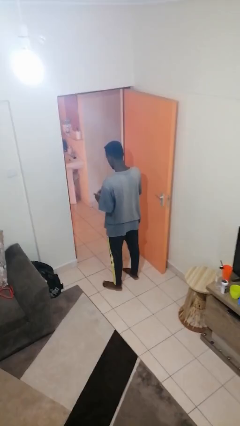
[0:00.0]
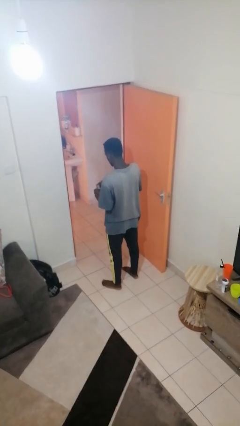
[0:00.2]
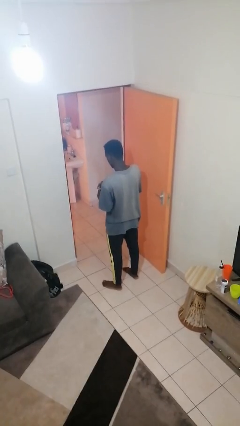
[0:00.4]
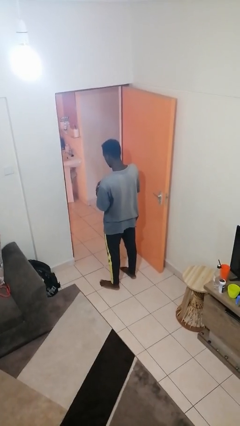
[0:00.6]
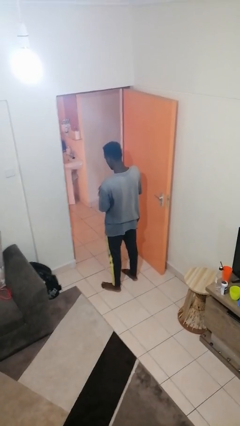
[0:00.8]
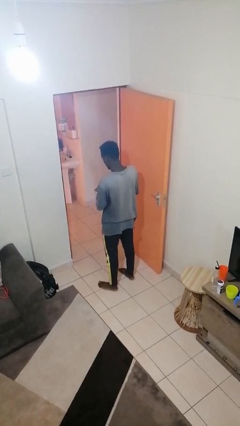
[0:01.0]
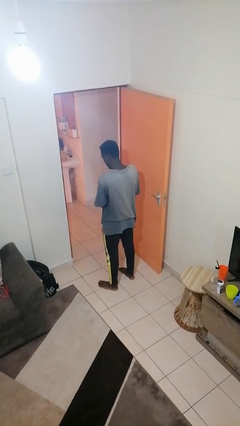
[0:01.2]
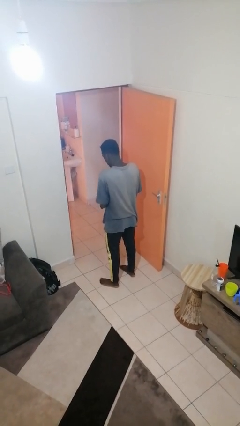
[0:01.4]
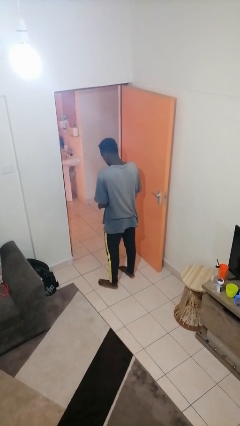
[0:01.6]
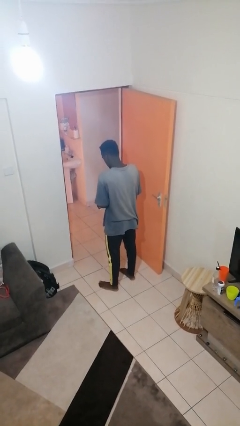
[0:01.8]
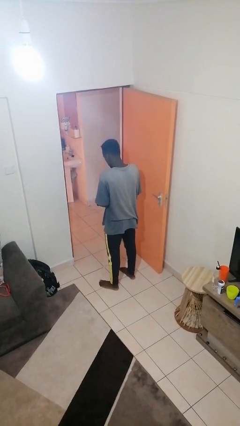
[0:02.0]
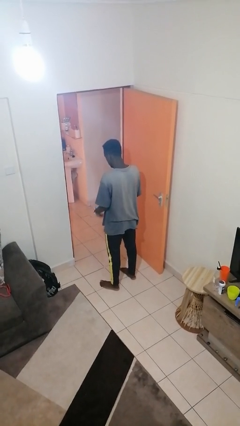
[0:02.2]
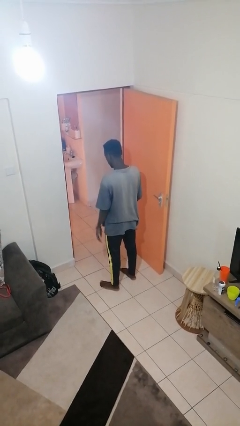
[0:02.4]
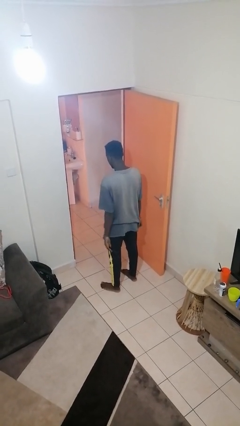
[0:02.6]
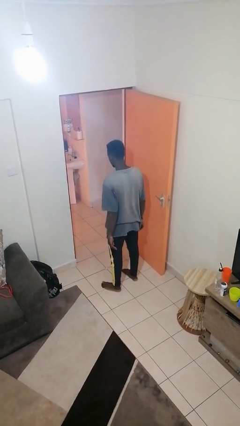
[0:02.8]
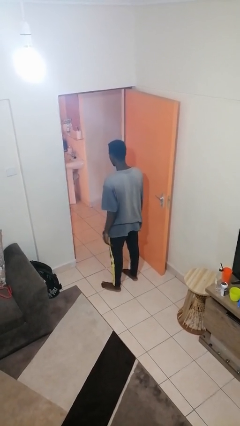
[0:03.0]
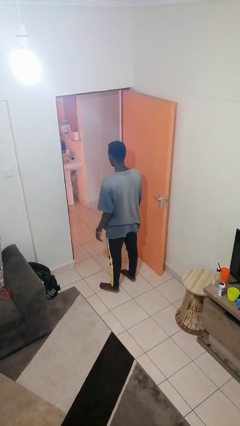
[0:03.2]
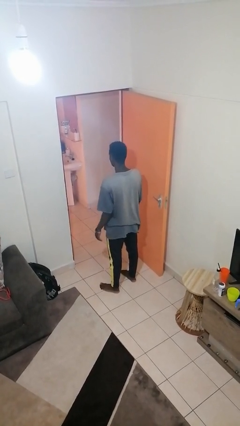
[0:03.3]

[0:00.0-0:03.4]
person puts on wristwatch

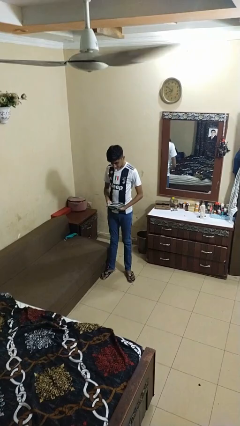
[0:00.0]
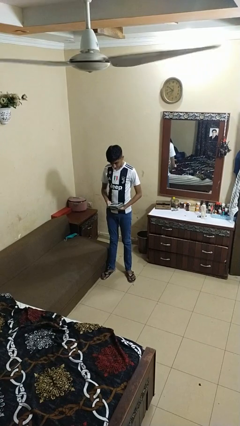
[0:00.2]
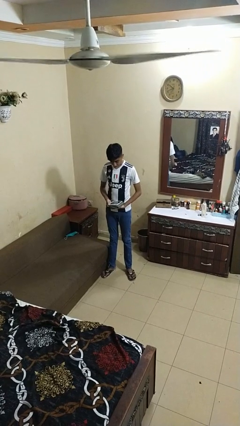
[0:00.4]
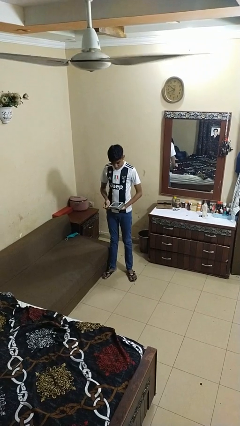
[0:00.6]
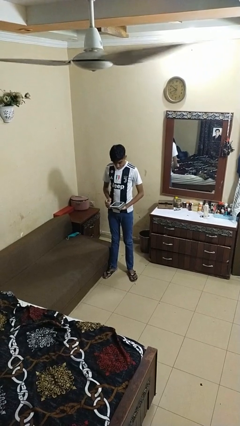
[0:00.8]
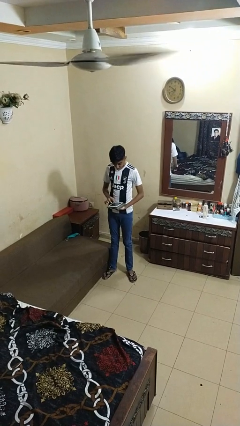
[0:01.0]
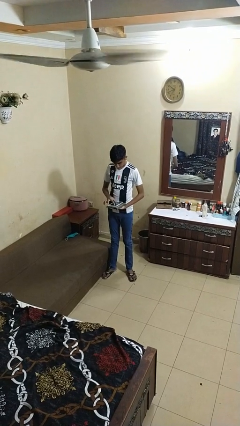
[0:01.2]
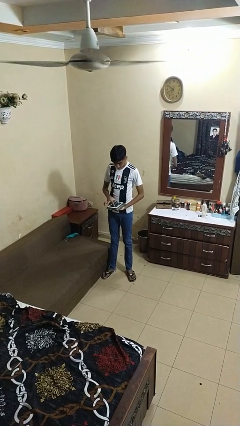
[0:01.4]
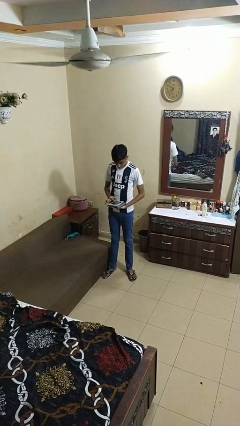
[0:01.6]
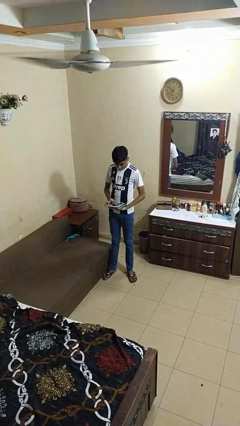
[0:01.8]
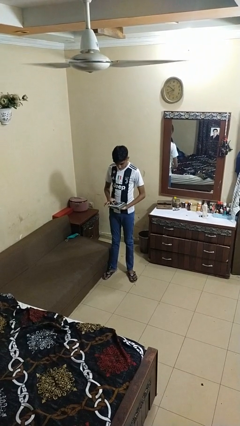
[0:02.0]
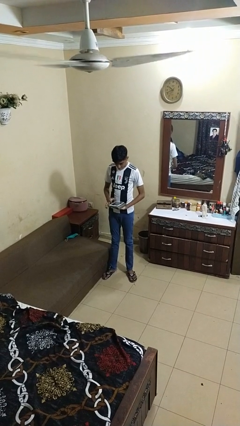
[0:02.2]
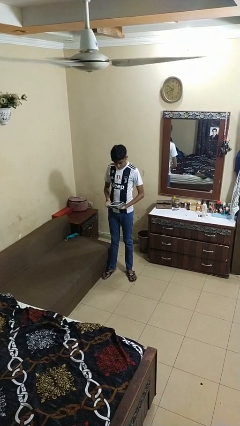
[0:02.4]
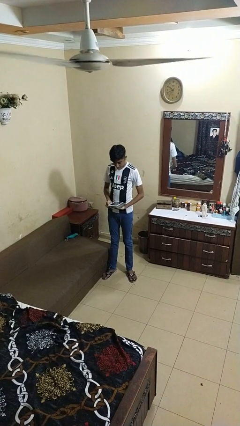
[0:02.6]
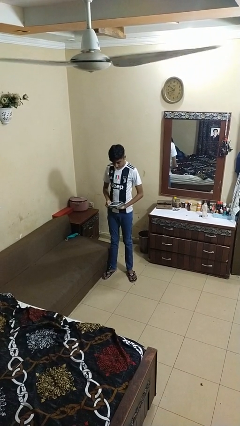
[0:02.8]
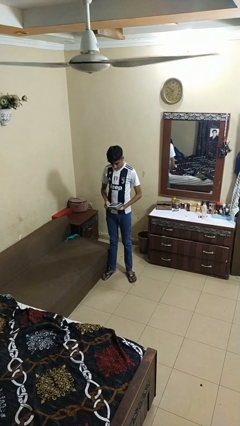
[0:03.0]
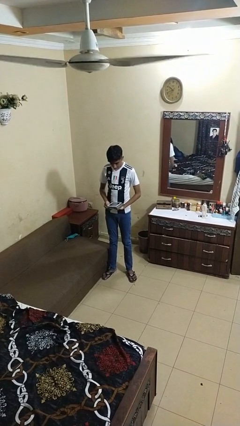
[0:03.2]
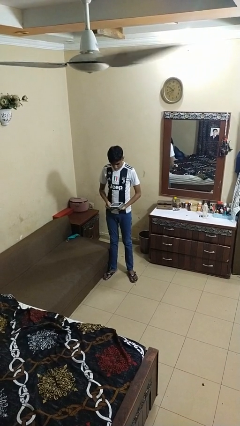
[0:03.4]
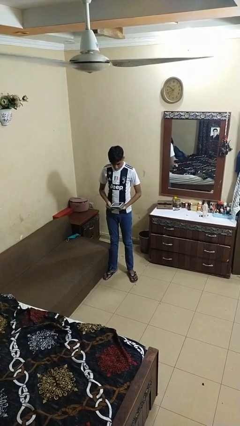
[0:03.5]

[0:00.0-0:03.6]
person gestures zoom in

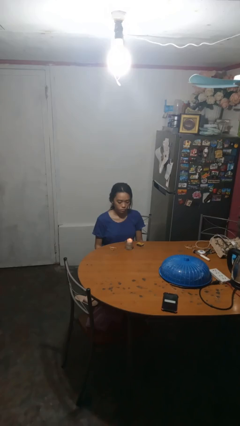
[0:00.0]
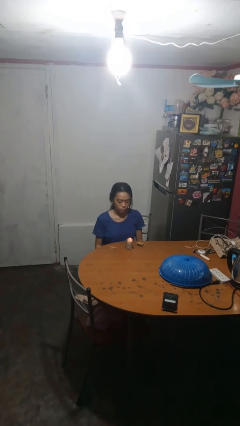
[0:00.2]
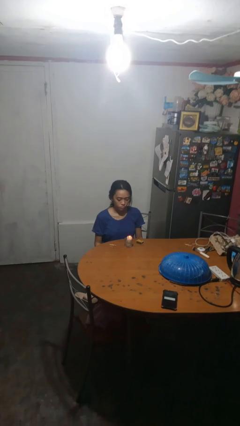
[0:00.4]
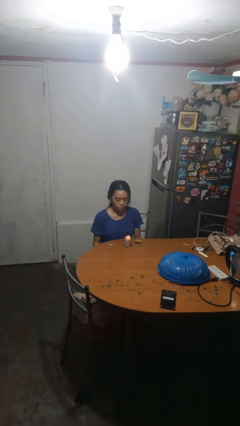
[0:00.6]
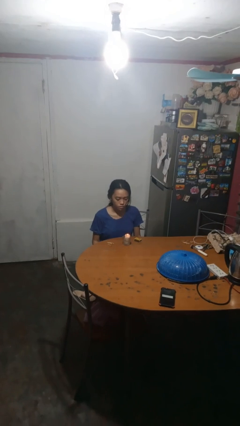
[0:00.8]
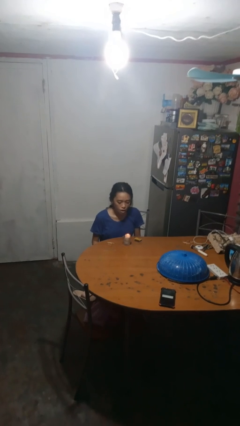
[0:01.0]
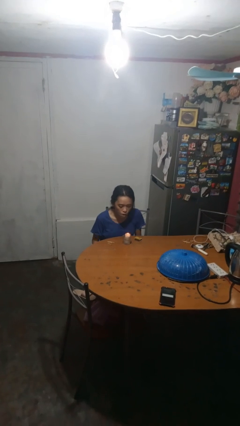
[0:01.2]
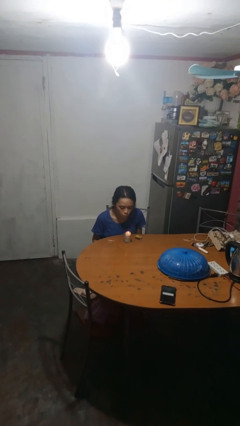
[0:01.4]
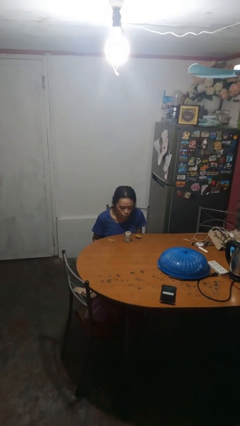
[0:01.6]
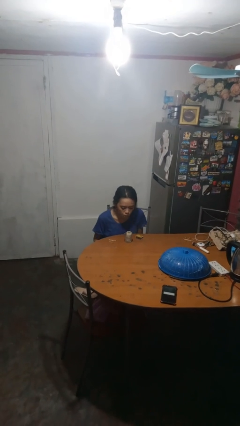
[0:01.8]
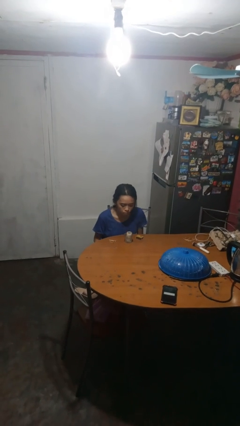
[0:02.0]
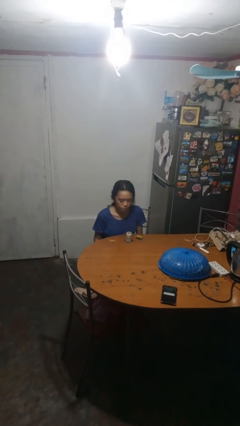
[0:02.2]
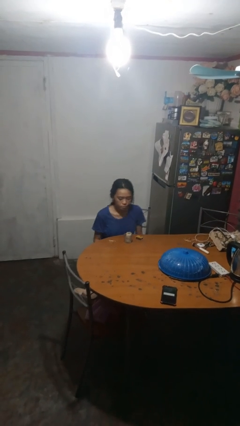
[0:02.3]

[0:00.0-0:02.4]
person extinguishes candle

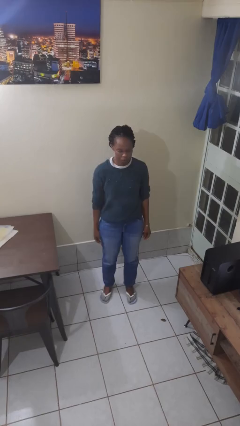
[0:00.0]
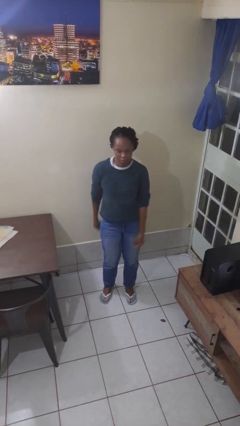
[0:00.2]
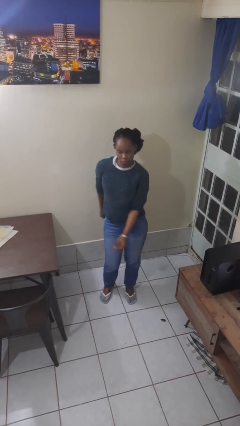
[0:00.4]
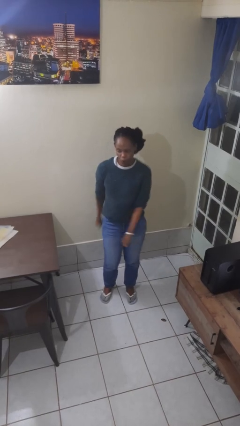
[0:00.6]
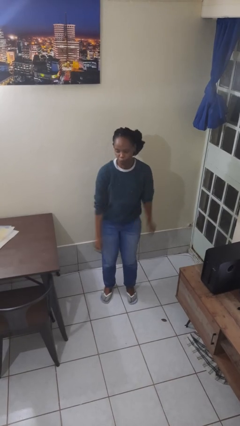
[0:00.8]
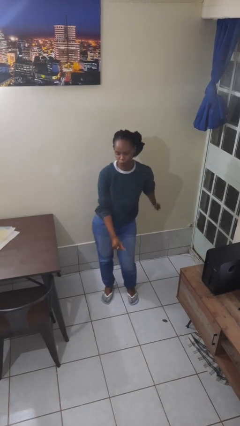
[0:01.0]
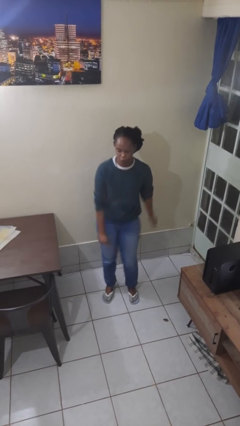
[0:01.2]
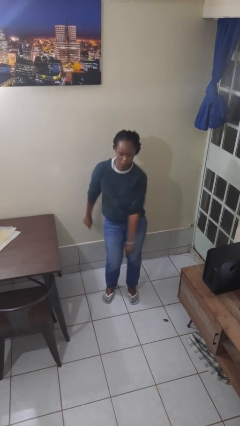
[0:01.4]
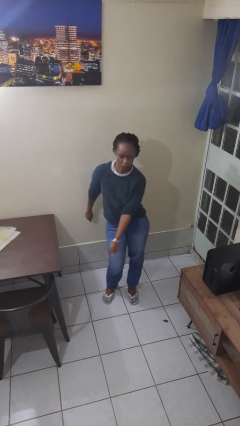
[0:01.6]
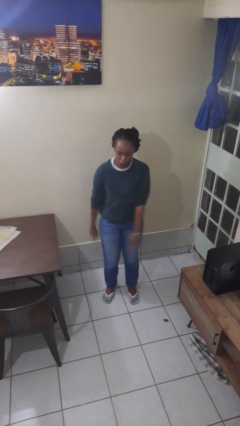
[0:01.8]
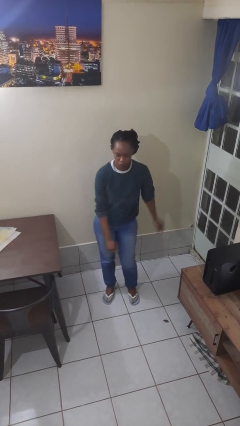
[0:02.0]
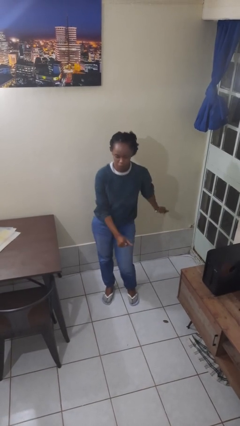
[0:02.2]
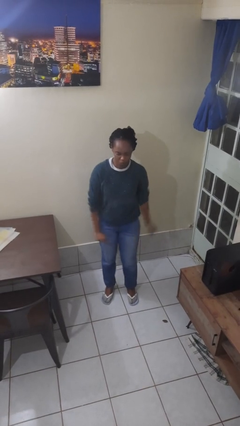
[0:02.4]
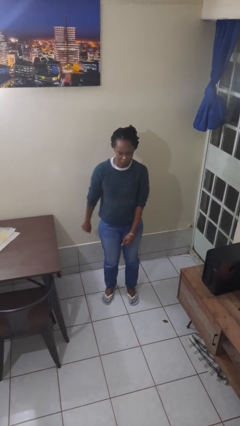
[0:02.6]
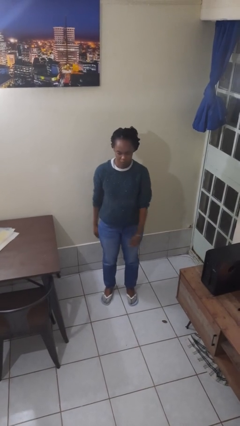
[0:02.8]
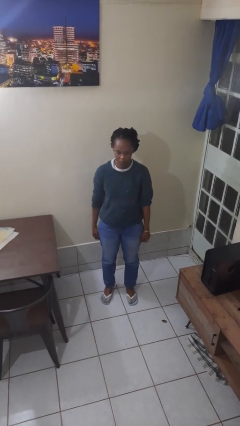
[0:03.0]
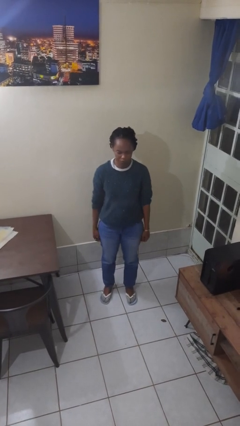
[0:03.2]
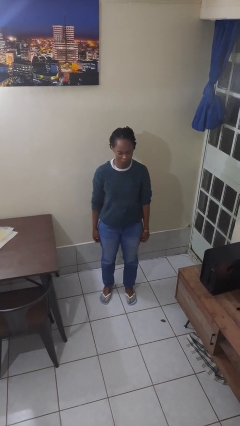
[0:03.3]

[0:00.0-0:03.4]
person dances in place

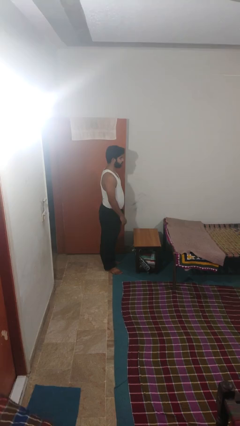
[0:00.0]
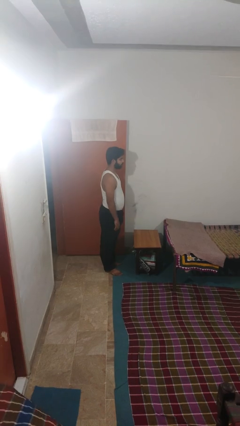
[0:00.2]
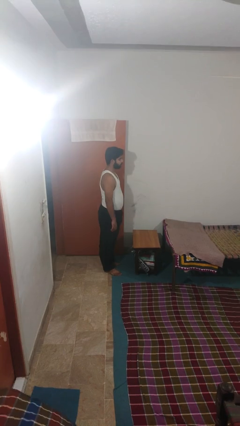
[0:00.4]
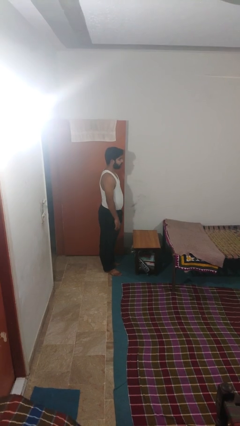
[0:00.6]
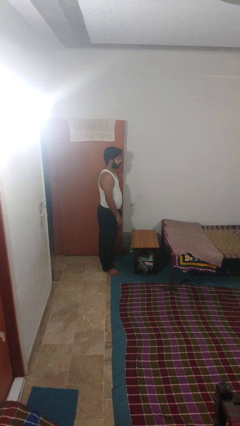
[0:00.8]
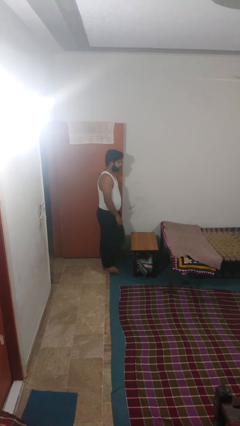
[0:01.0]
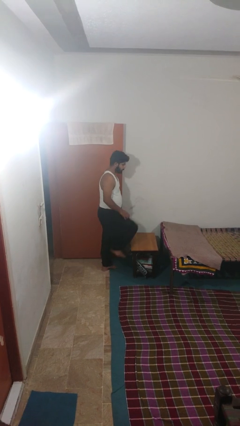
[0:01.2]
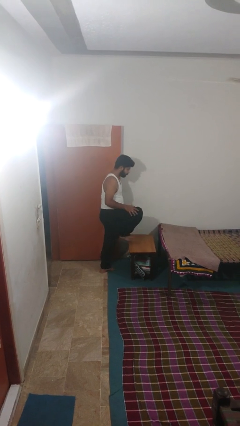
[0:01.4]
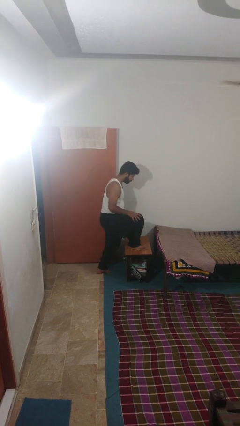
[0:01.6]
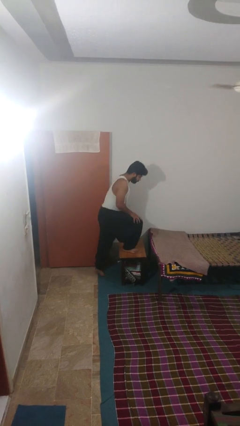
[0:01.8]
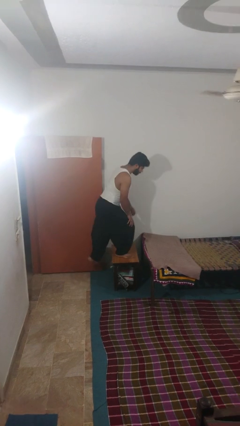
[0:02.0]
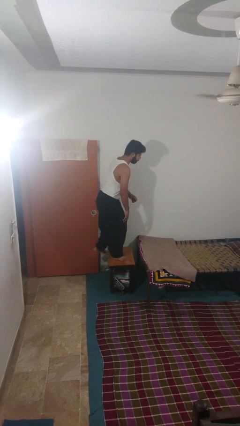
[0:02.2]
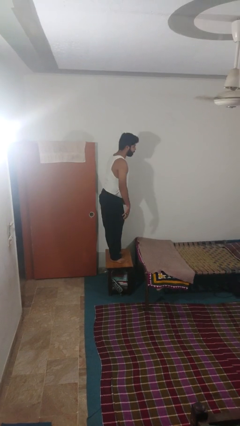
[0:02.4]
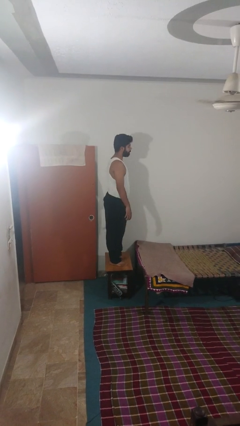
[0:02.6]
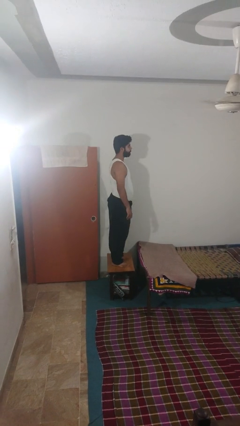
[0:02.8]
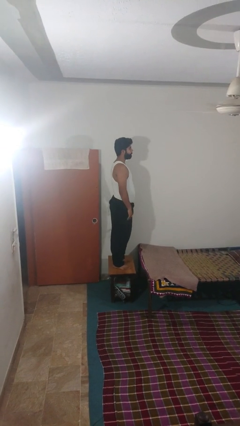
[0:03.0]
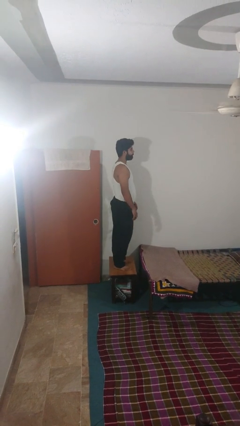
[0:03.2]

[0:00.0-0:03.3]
person climbs on table

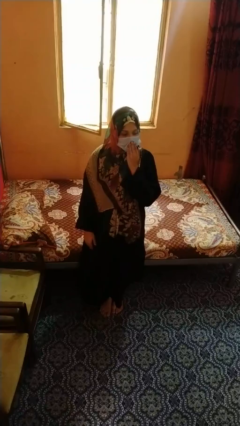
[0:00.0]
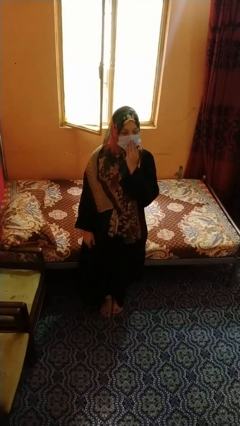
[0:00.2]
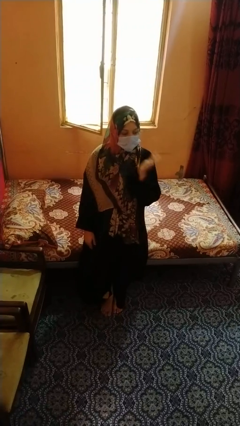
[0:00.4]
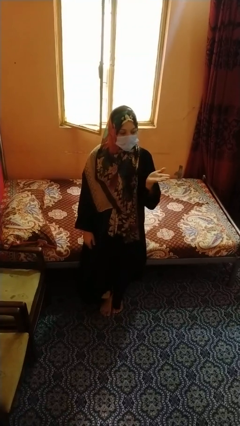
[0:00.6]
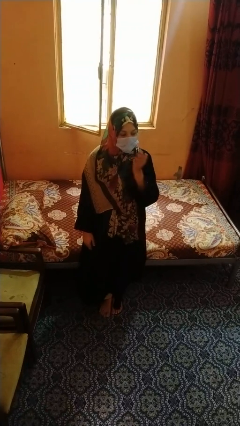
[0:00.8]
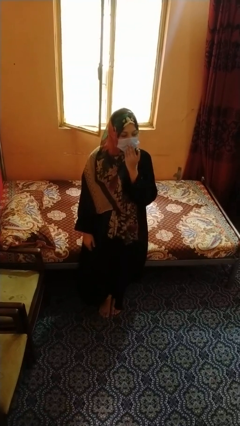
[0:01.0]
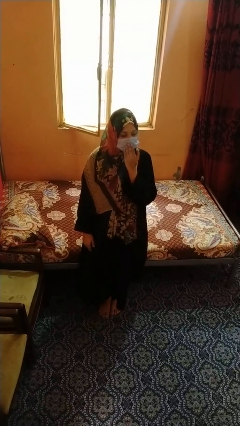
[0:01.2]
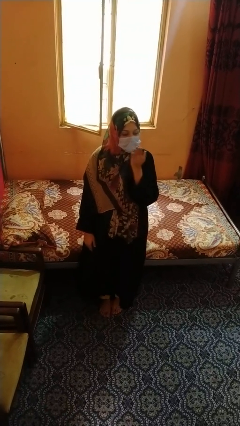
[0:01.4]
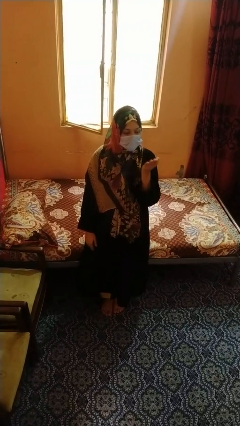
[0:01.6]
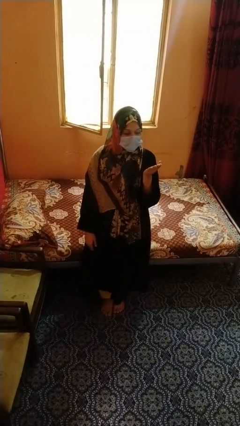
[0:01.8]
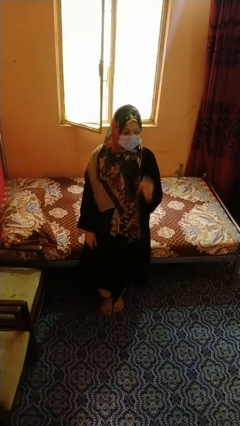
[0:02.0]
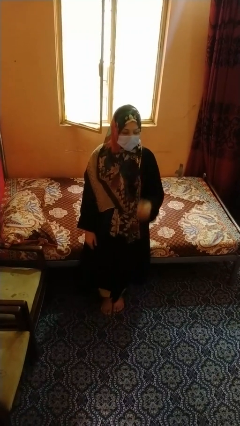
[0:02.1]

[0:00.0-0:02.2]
person gestures blow kiss
